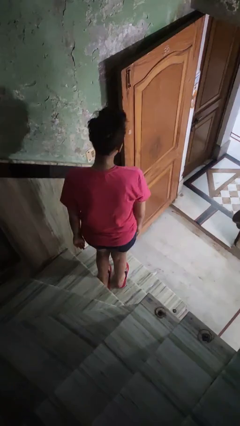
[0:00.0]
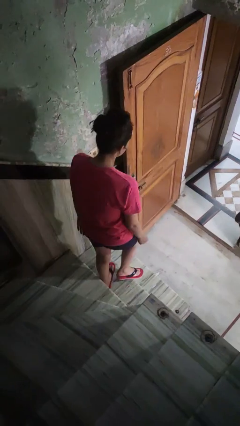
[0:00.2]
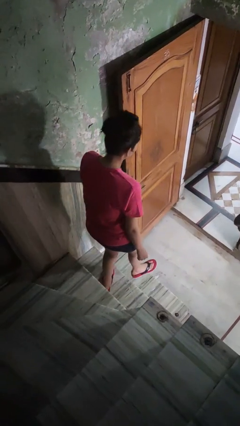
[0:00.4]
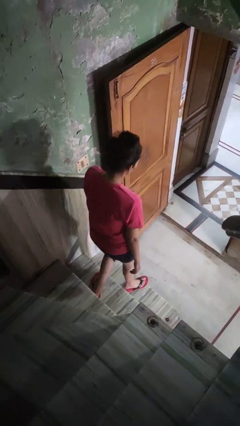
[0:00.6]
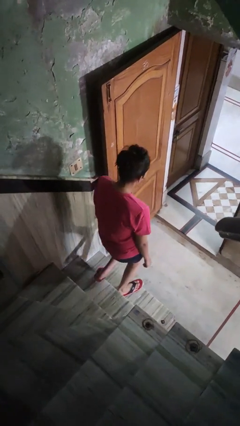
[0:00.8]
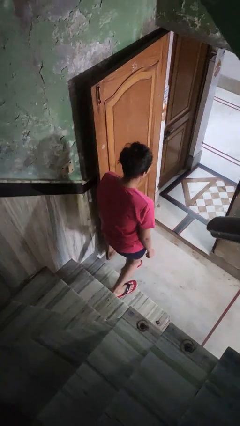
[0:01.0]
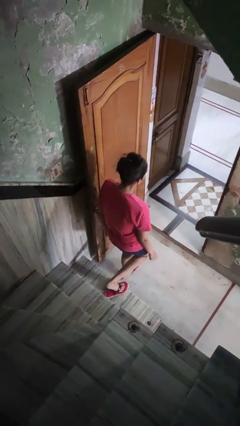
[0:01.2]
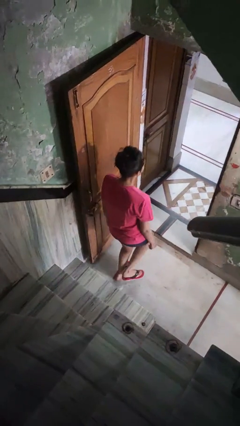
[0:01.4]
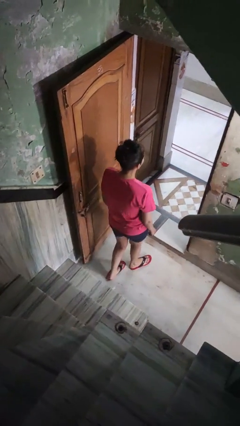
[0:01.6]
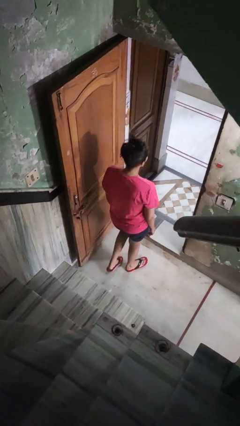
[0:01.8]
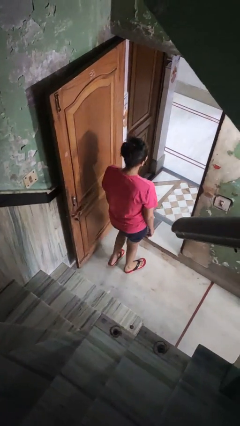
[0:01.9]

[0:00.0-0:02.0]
person climbs down stairs

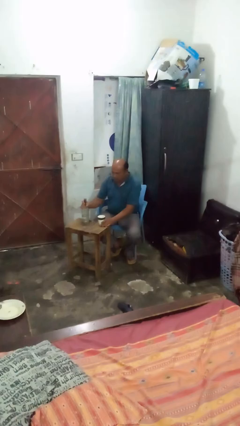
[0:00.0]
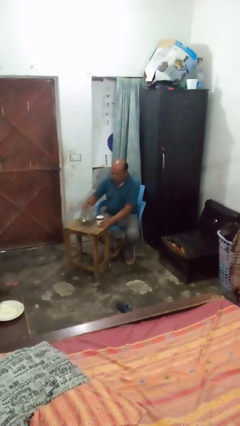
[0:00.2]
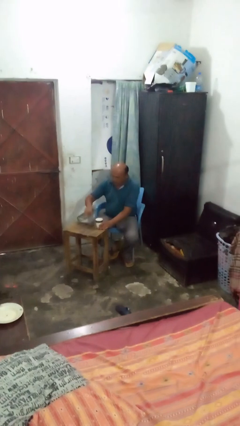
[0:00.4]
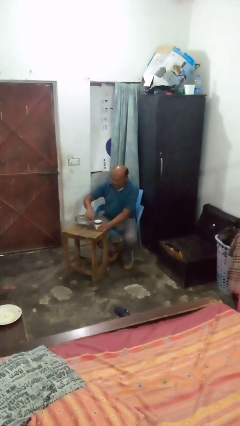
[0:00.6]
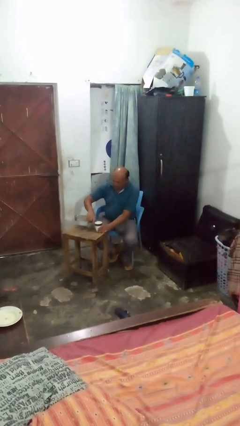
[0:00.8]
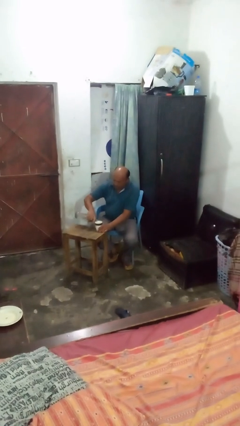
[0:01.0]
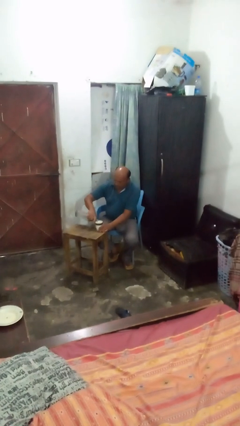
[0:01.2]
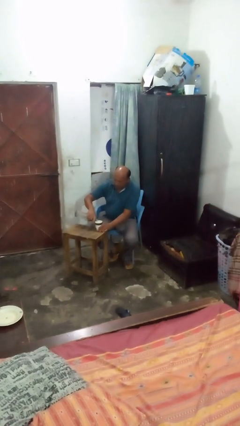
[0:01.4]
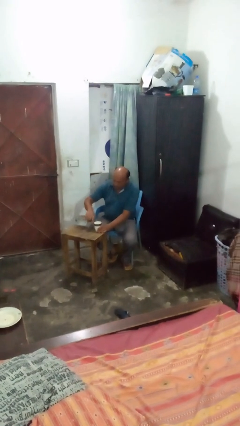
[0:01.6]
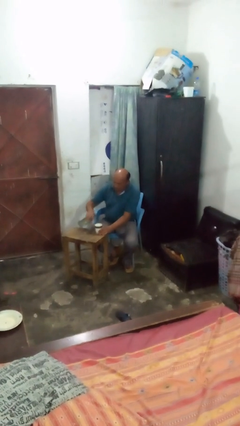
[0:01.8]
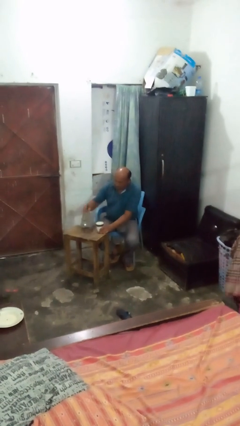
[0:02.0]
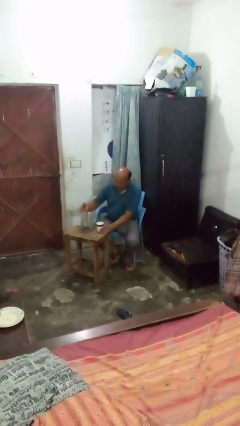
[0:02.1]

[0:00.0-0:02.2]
person pours liquid into cup

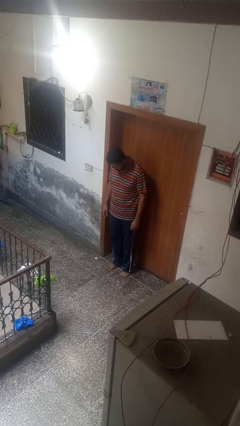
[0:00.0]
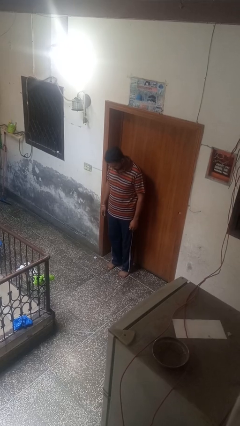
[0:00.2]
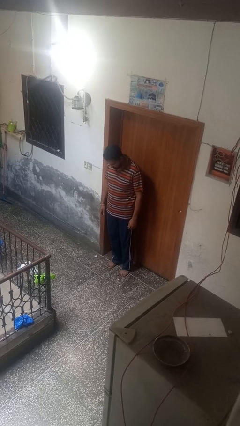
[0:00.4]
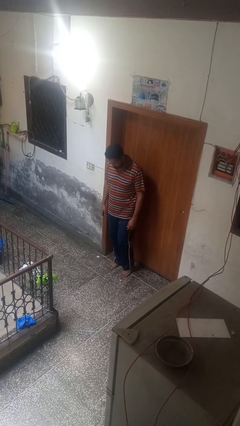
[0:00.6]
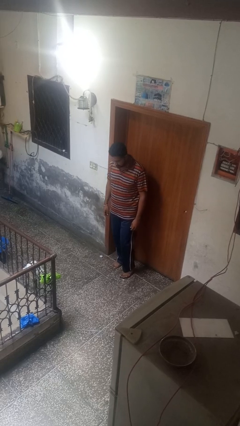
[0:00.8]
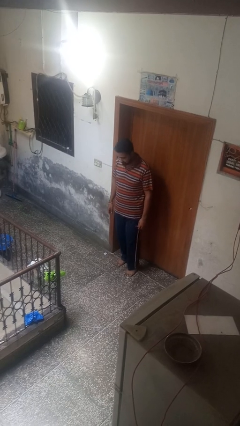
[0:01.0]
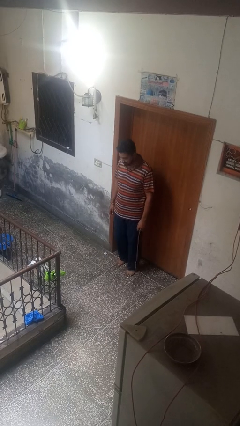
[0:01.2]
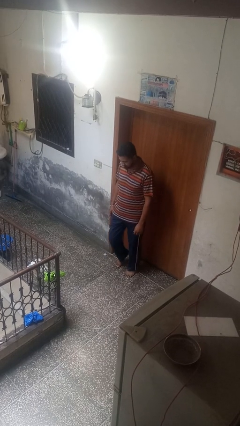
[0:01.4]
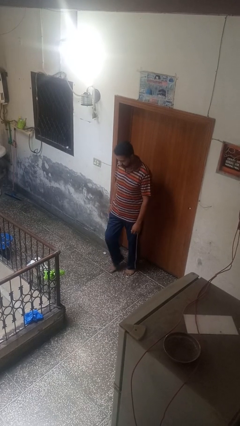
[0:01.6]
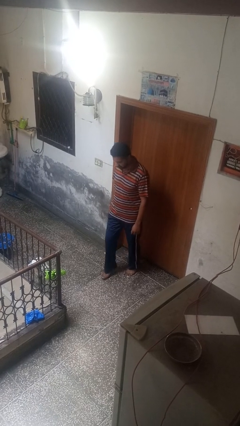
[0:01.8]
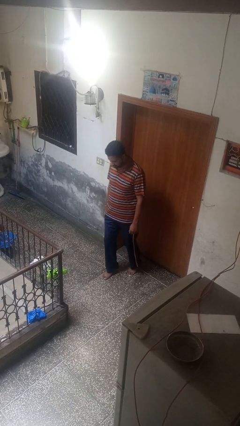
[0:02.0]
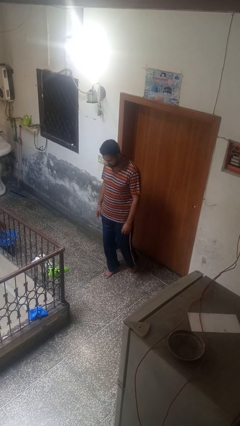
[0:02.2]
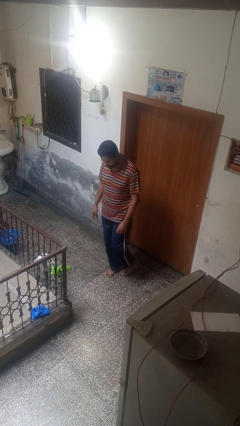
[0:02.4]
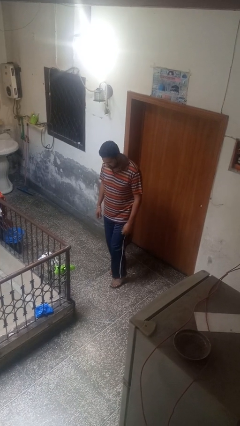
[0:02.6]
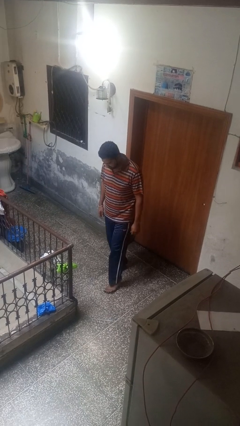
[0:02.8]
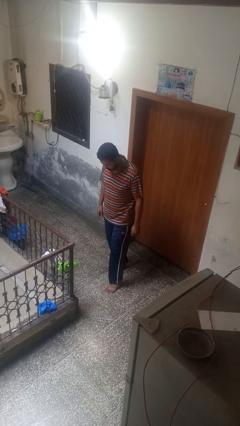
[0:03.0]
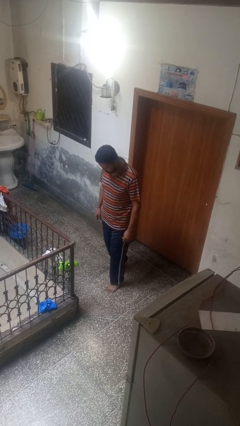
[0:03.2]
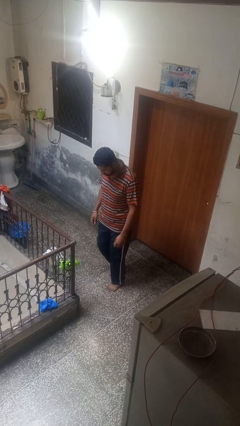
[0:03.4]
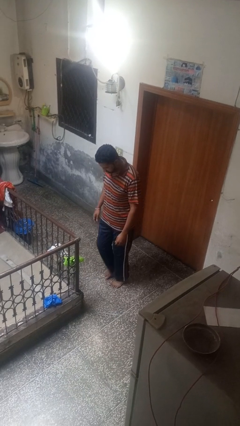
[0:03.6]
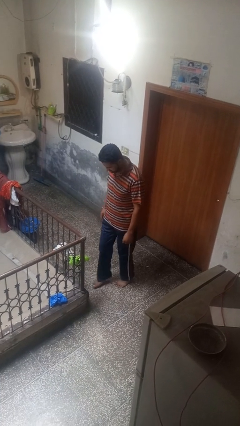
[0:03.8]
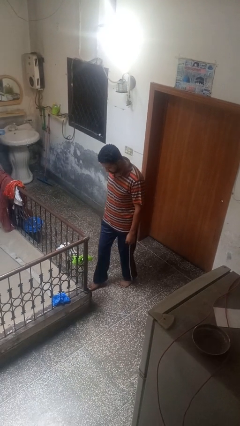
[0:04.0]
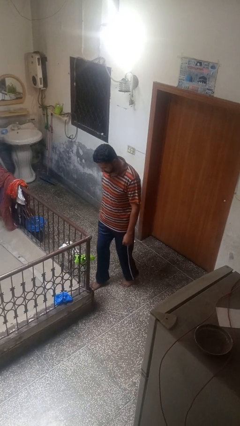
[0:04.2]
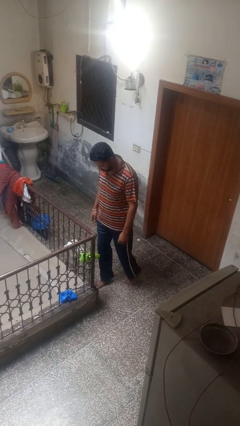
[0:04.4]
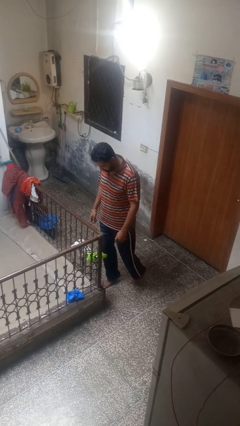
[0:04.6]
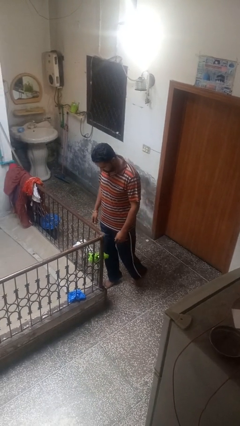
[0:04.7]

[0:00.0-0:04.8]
person walks tiptoe

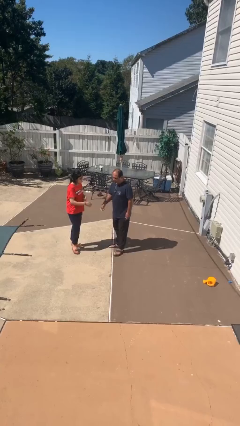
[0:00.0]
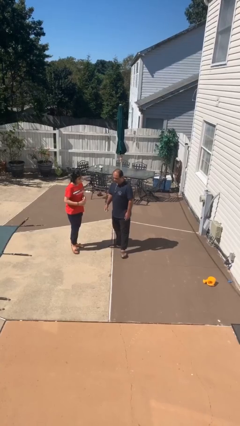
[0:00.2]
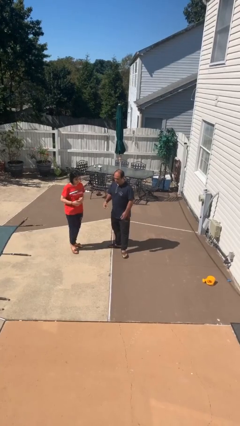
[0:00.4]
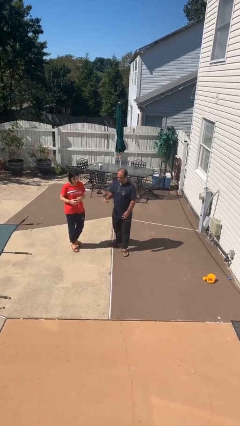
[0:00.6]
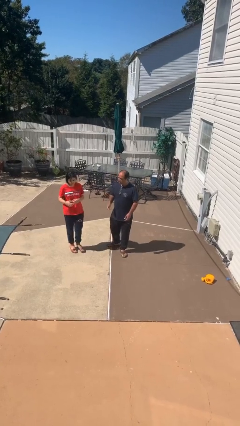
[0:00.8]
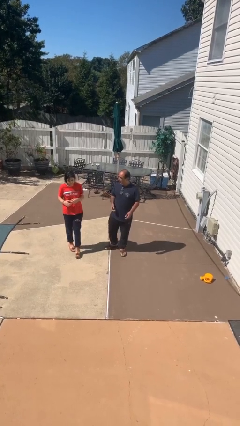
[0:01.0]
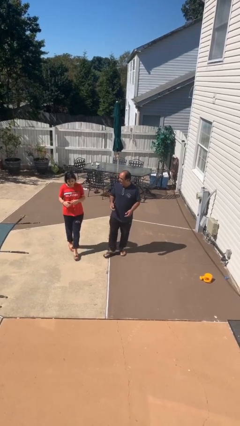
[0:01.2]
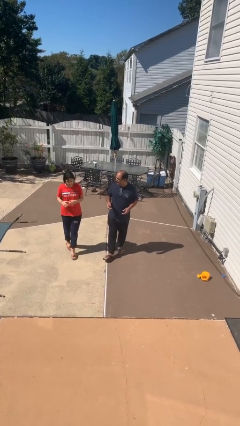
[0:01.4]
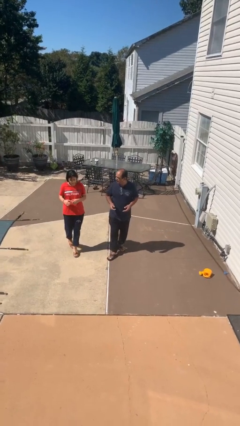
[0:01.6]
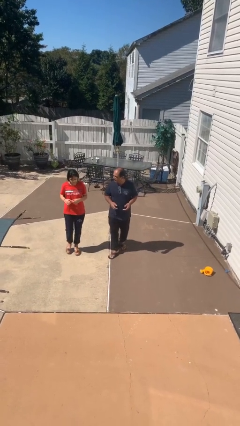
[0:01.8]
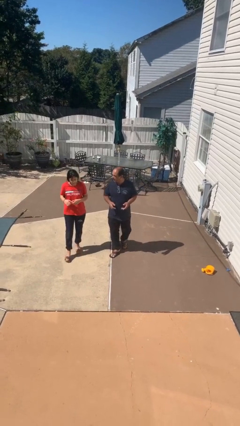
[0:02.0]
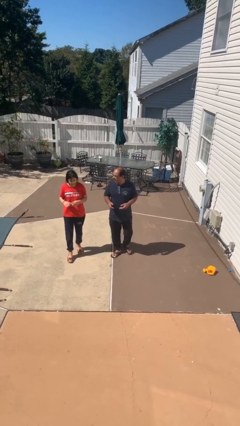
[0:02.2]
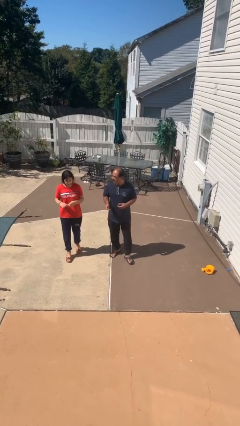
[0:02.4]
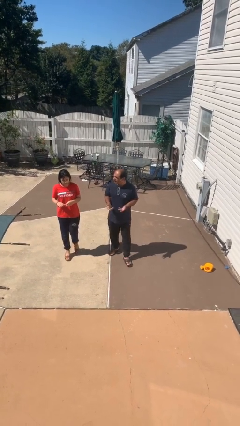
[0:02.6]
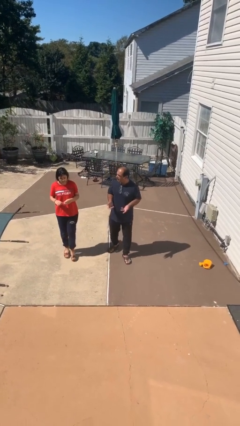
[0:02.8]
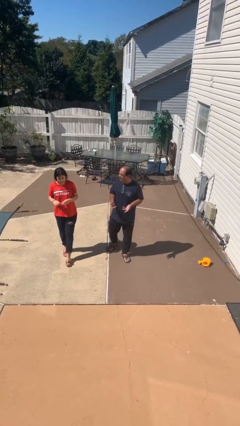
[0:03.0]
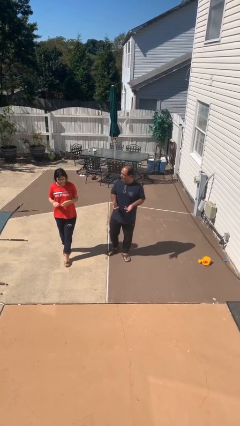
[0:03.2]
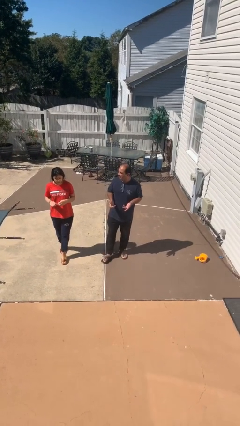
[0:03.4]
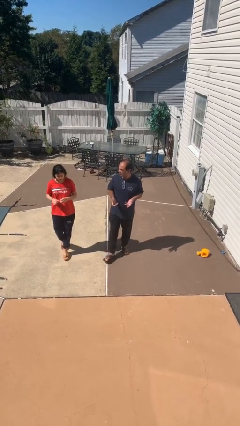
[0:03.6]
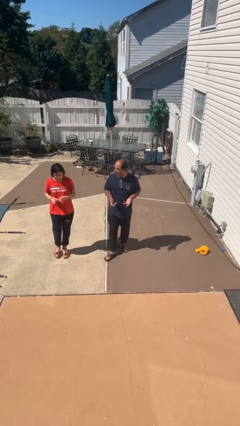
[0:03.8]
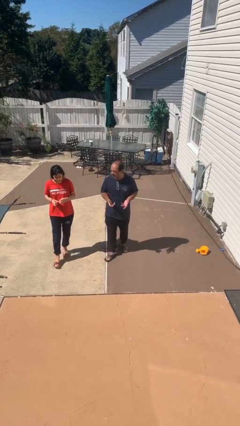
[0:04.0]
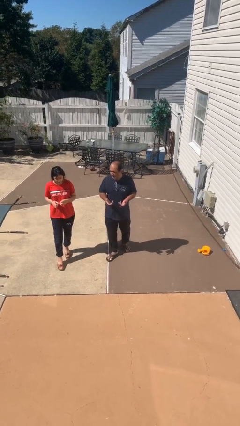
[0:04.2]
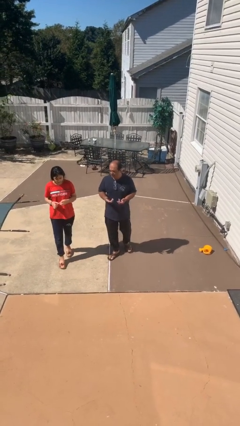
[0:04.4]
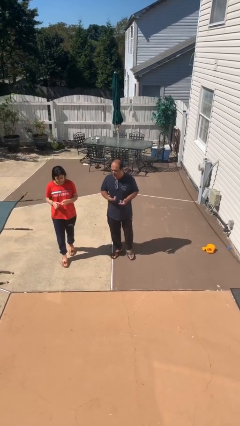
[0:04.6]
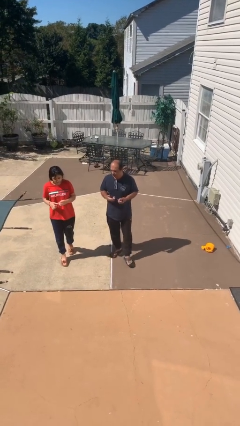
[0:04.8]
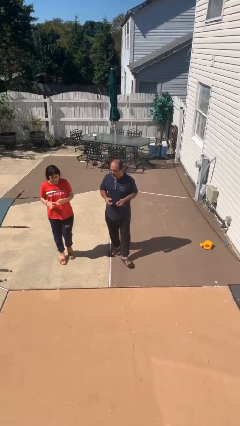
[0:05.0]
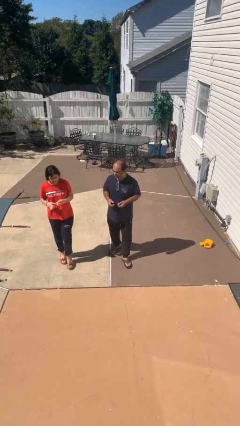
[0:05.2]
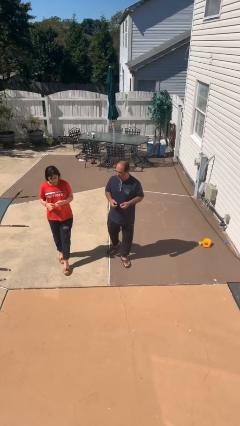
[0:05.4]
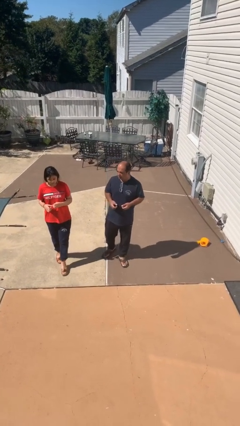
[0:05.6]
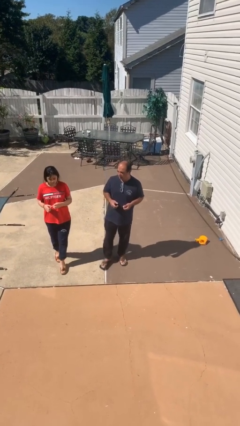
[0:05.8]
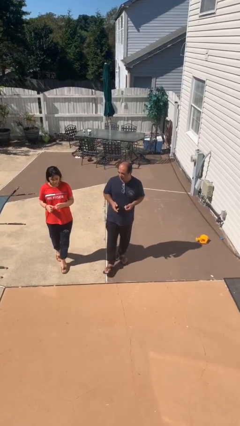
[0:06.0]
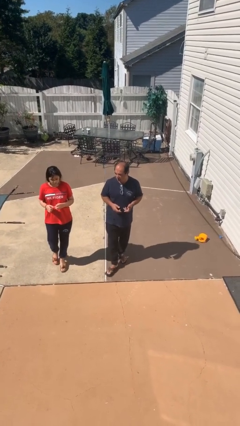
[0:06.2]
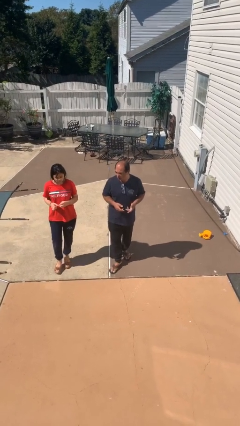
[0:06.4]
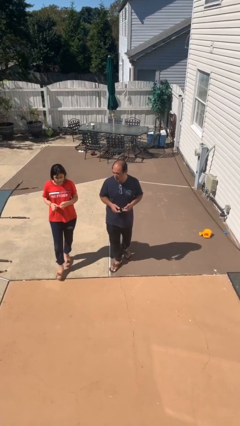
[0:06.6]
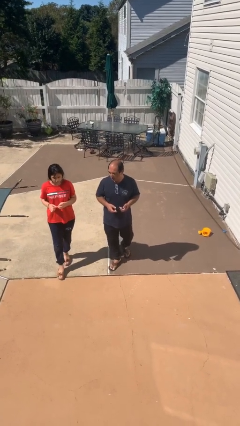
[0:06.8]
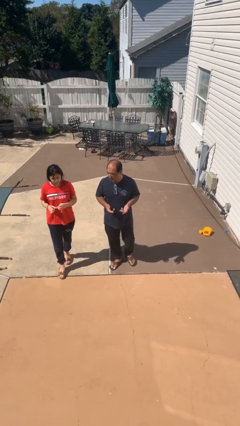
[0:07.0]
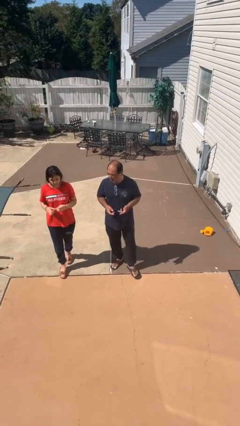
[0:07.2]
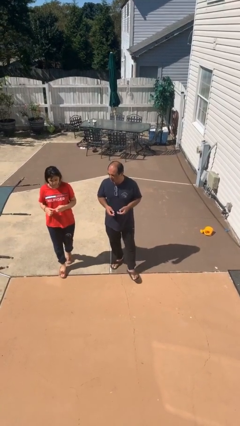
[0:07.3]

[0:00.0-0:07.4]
person talks to person

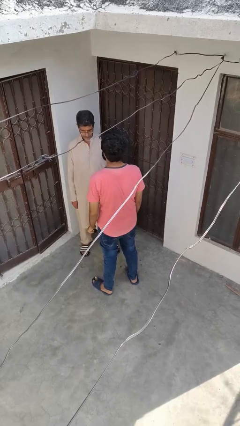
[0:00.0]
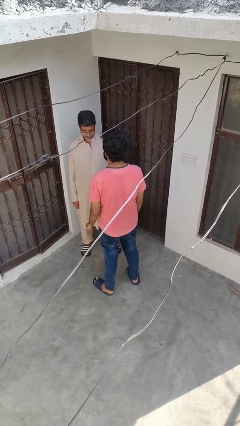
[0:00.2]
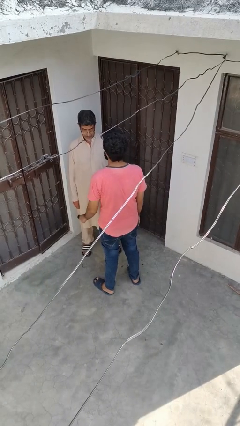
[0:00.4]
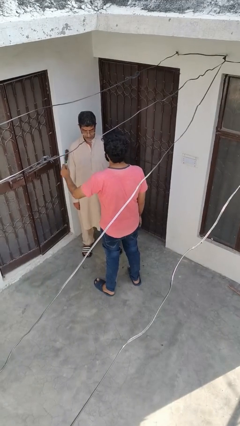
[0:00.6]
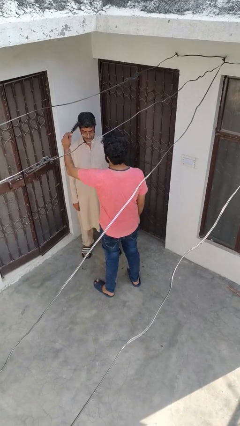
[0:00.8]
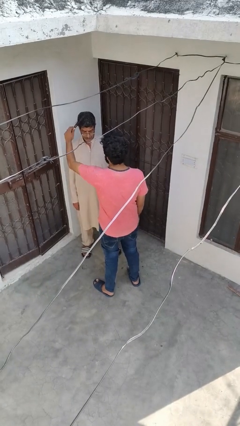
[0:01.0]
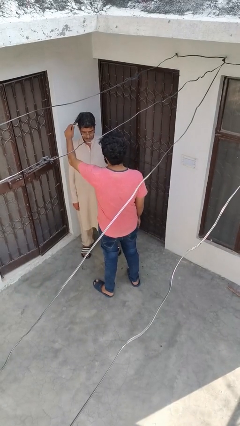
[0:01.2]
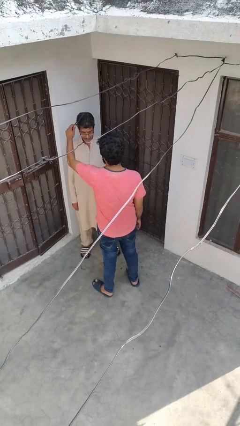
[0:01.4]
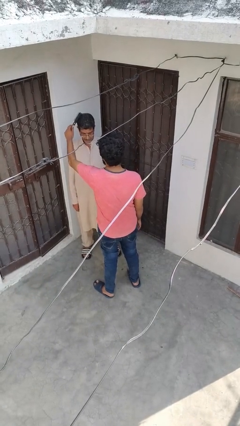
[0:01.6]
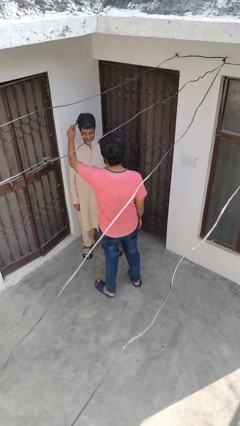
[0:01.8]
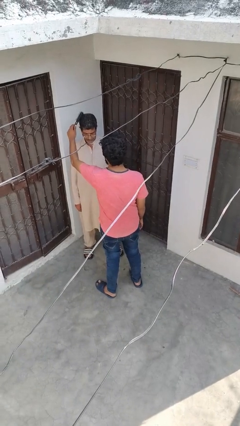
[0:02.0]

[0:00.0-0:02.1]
person brushes hair of person
